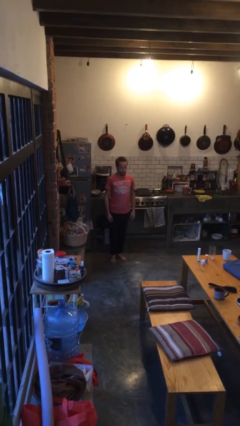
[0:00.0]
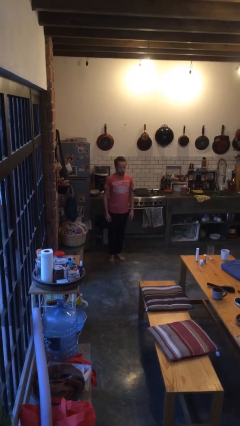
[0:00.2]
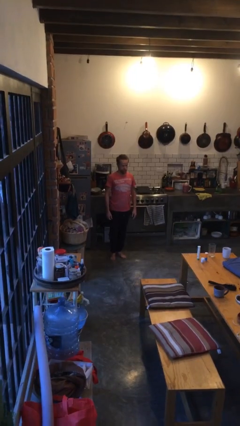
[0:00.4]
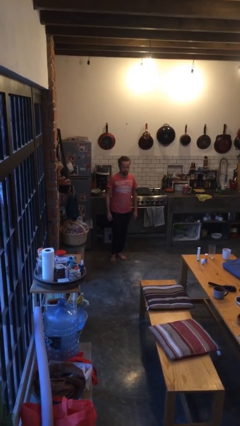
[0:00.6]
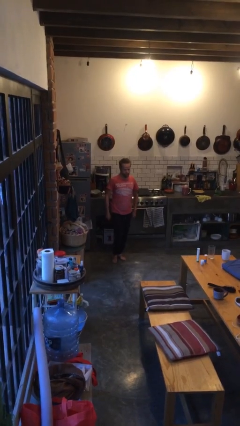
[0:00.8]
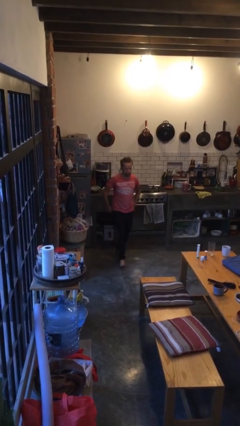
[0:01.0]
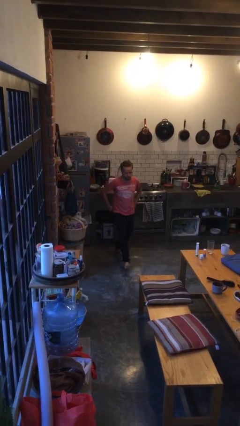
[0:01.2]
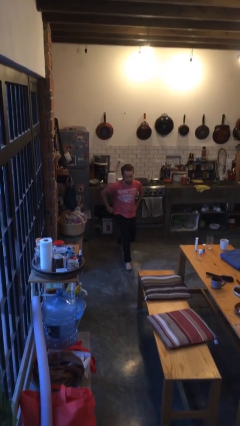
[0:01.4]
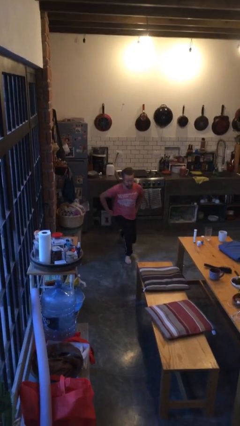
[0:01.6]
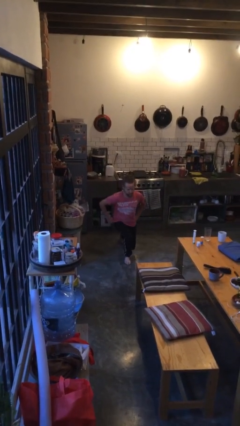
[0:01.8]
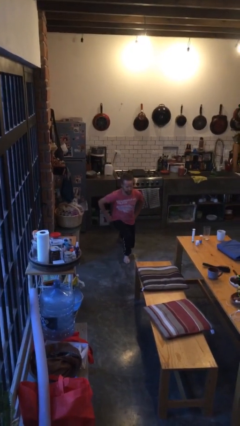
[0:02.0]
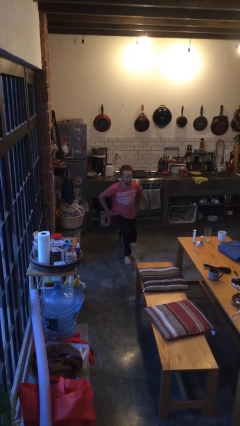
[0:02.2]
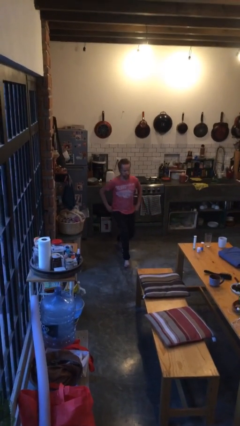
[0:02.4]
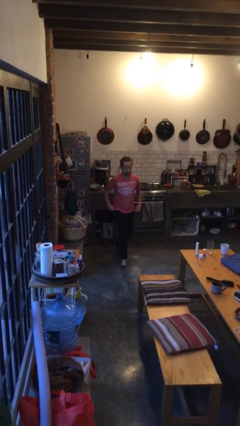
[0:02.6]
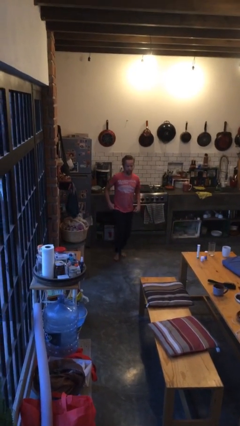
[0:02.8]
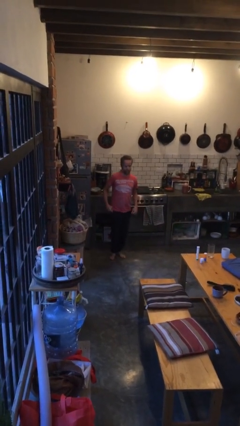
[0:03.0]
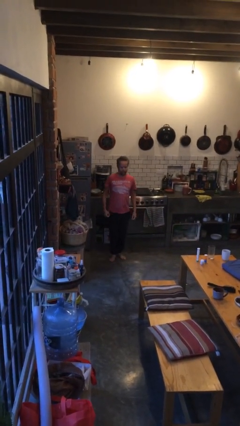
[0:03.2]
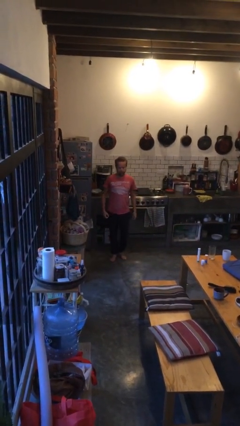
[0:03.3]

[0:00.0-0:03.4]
person exercises with lunges

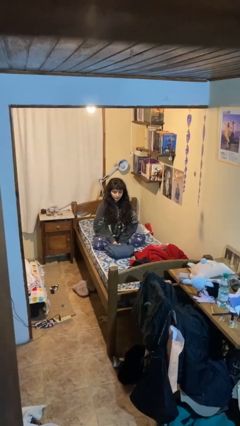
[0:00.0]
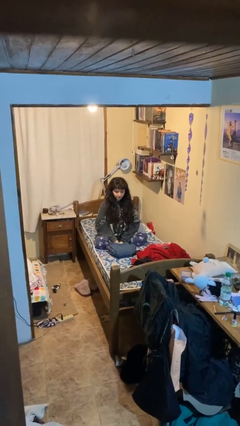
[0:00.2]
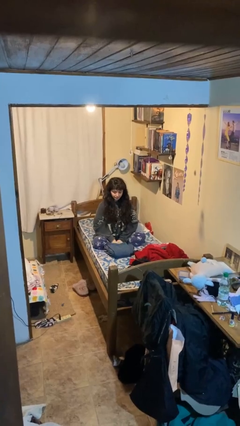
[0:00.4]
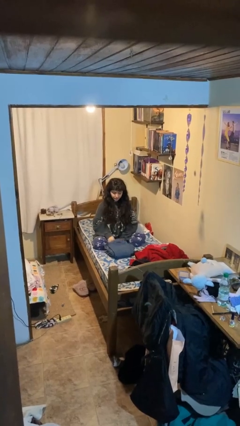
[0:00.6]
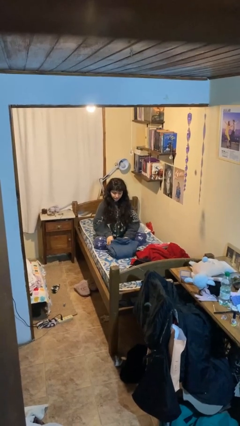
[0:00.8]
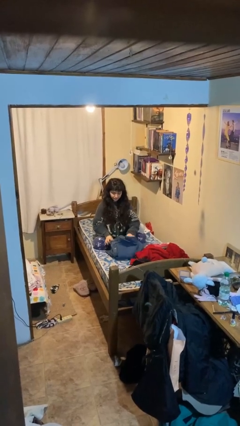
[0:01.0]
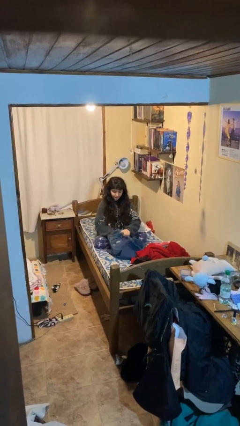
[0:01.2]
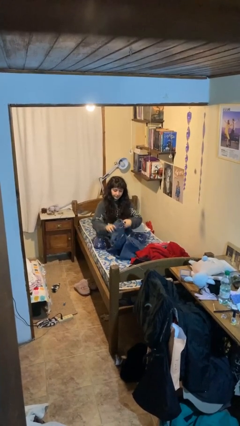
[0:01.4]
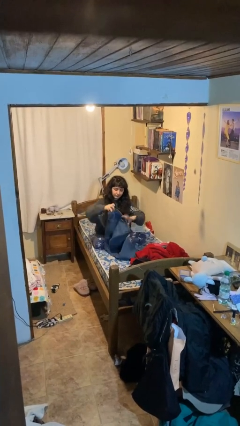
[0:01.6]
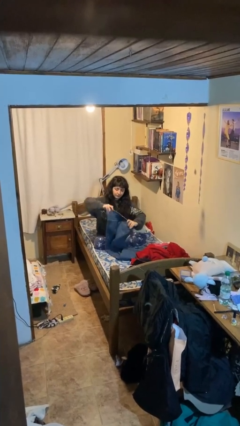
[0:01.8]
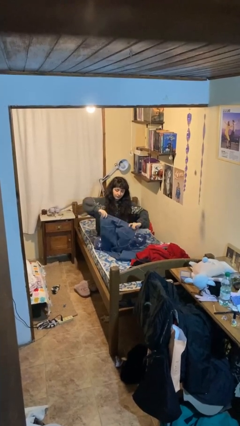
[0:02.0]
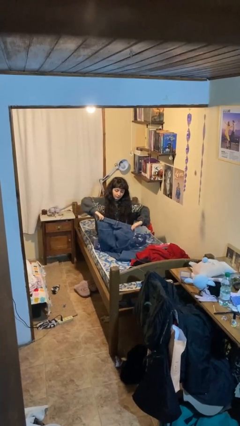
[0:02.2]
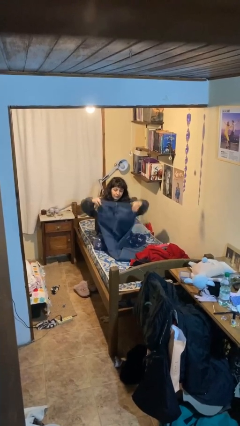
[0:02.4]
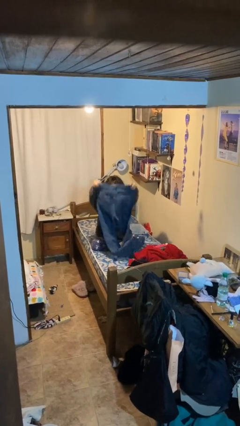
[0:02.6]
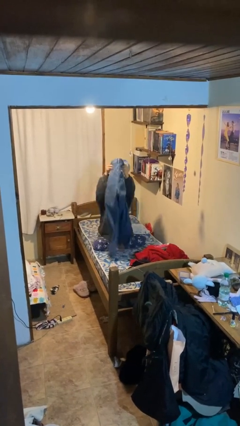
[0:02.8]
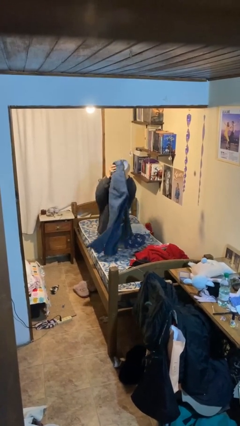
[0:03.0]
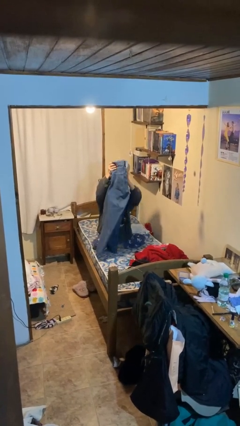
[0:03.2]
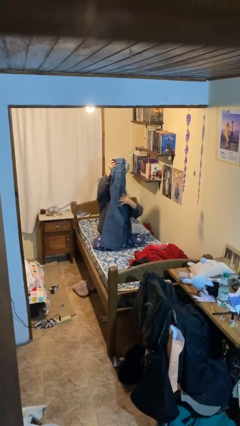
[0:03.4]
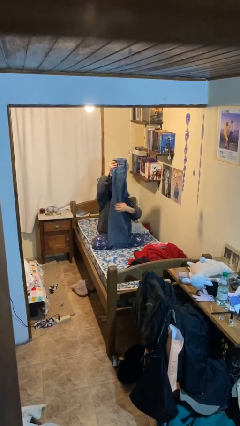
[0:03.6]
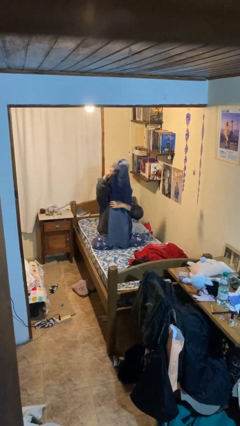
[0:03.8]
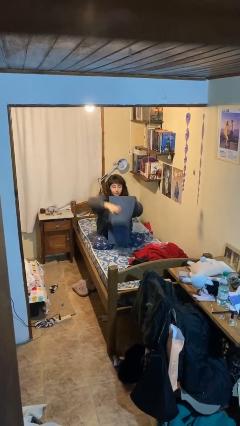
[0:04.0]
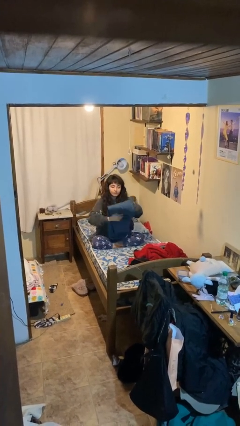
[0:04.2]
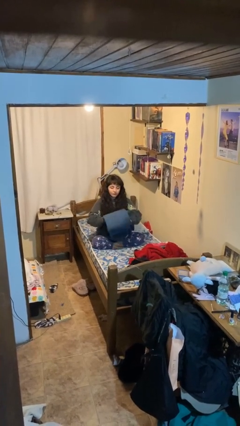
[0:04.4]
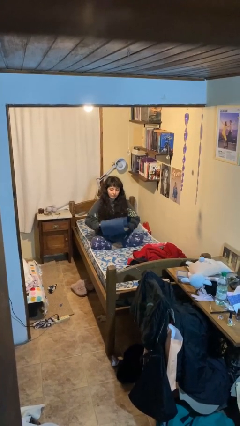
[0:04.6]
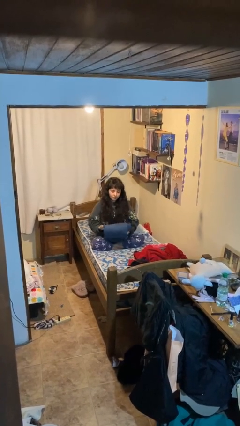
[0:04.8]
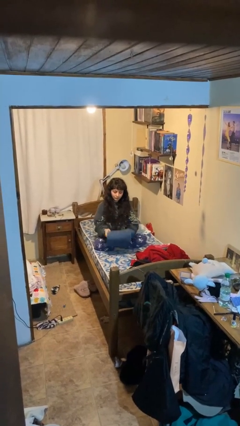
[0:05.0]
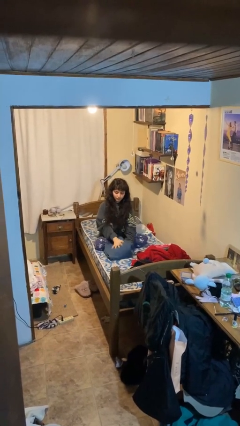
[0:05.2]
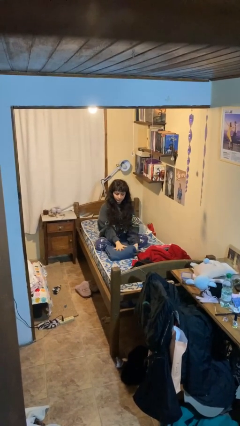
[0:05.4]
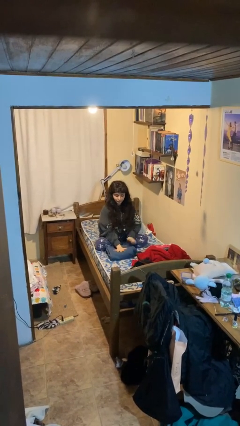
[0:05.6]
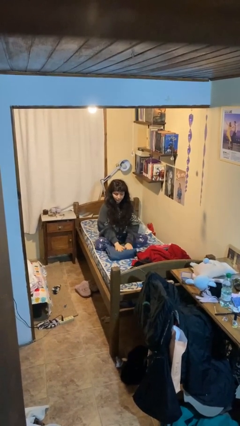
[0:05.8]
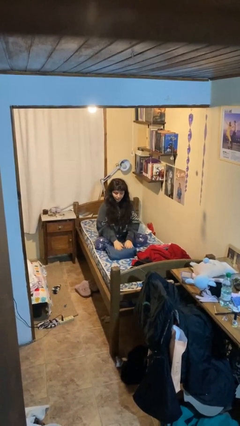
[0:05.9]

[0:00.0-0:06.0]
person folds pants

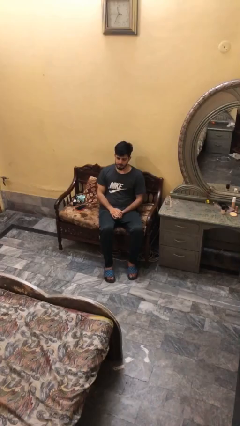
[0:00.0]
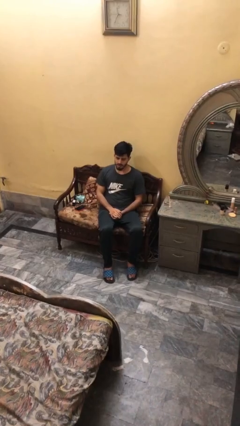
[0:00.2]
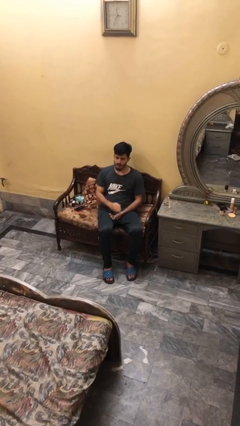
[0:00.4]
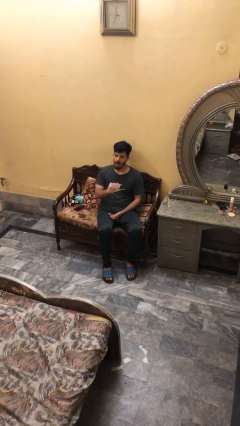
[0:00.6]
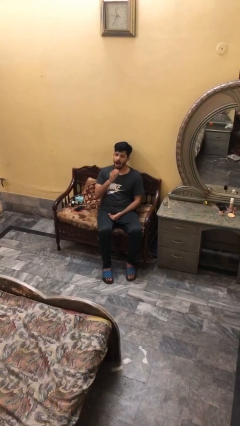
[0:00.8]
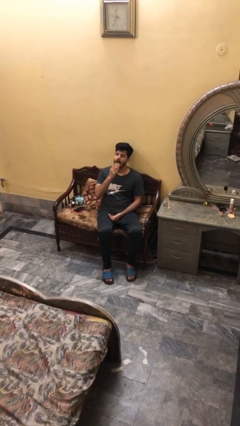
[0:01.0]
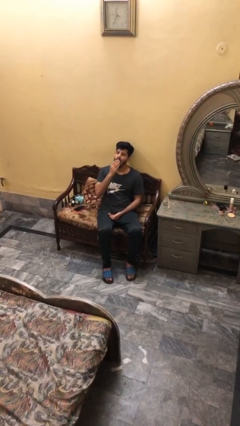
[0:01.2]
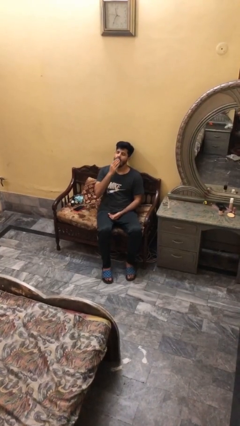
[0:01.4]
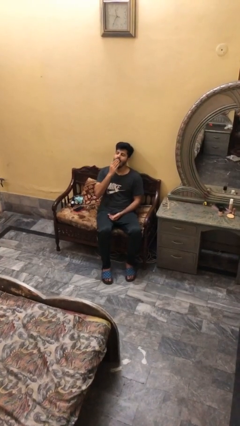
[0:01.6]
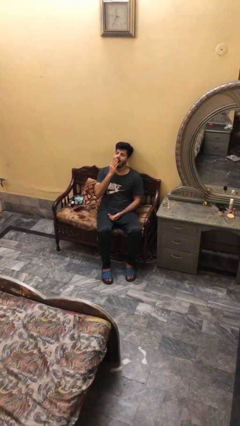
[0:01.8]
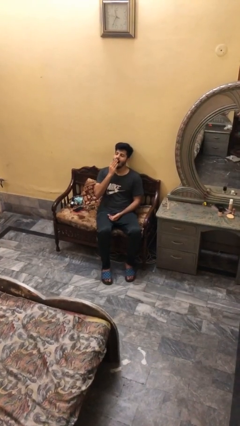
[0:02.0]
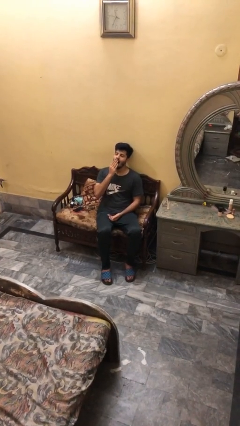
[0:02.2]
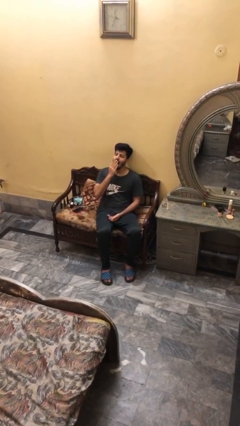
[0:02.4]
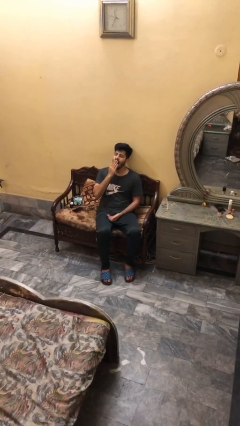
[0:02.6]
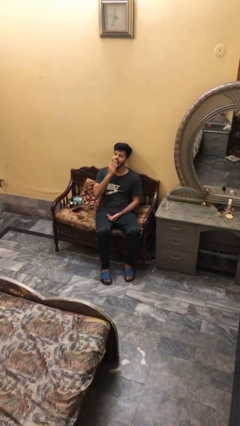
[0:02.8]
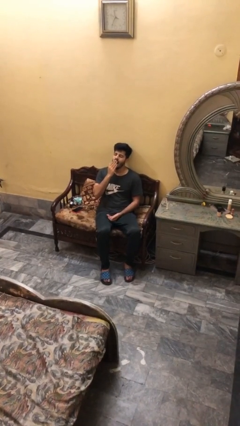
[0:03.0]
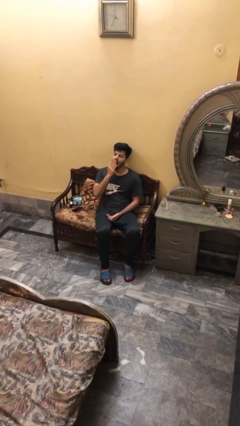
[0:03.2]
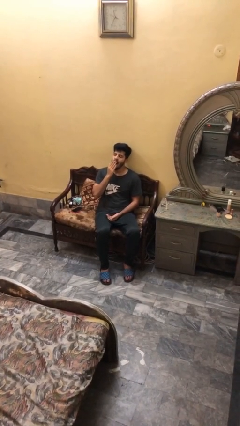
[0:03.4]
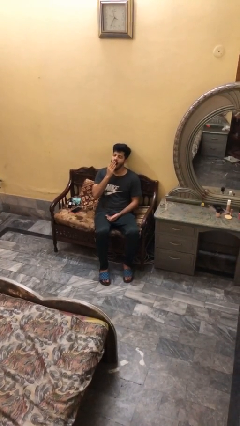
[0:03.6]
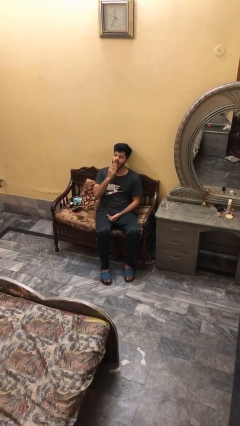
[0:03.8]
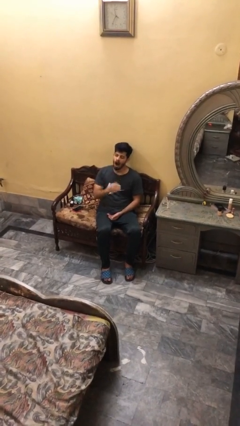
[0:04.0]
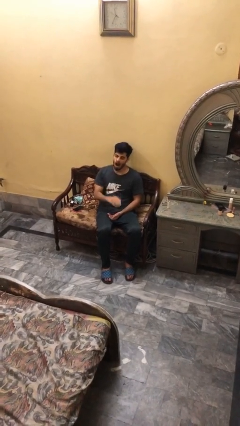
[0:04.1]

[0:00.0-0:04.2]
person yawns

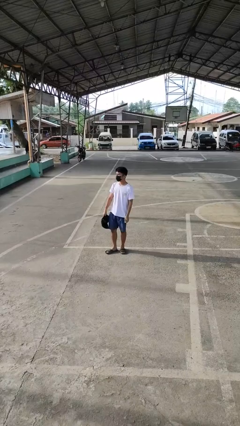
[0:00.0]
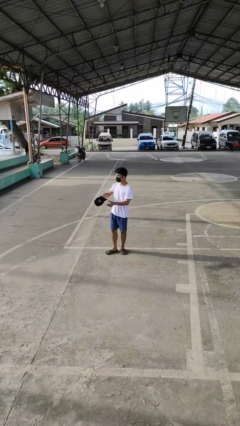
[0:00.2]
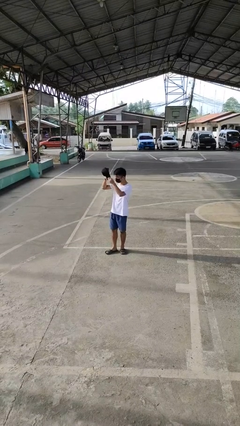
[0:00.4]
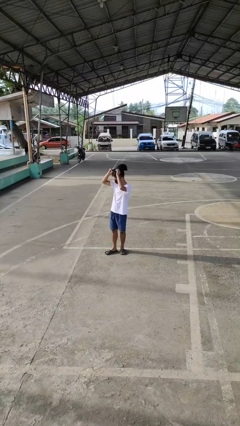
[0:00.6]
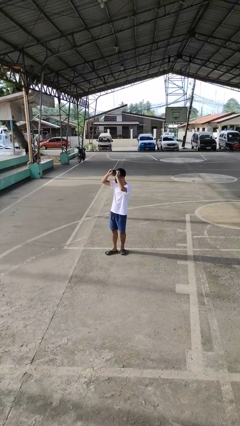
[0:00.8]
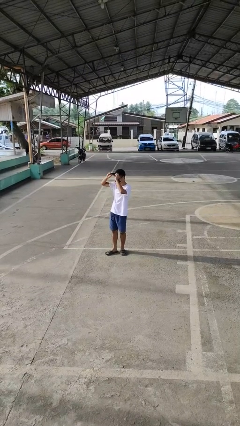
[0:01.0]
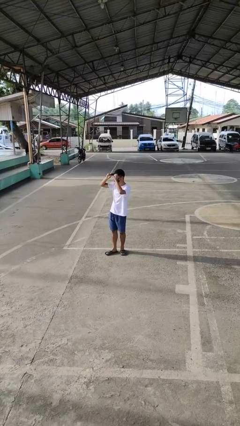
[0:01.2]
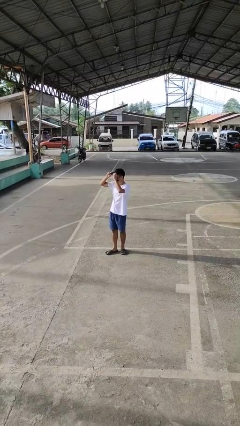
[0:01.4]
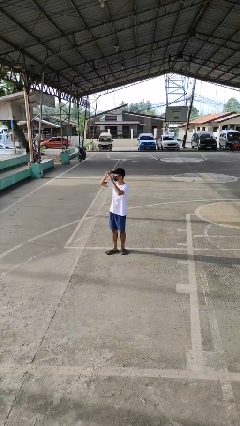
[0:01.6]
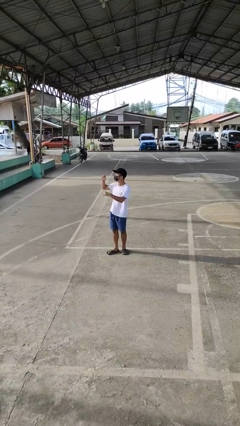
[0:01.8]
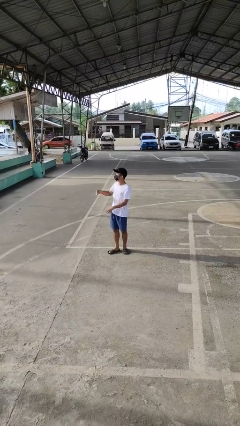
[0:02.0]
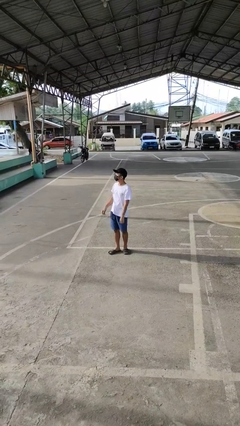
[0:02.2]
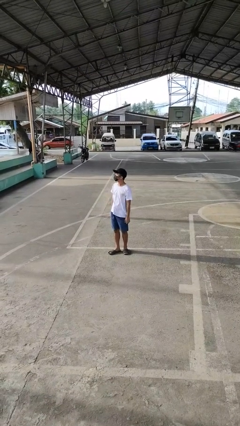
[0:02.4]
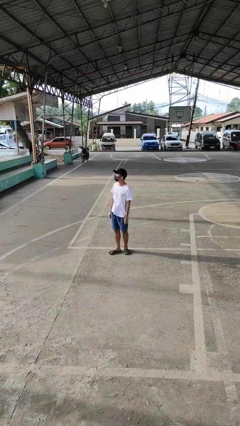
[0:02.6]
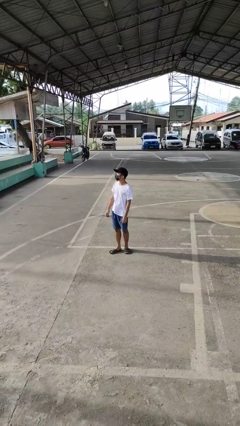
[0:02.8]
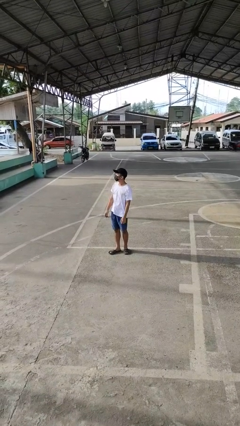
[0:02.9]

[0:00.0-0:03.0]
person puts on hat

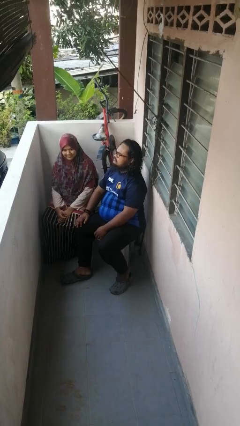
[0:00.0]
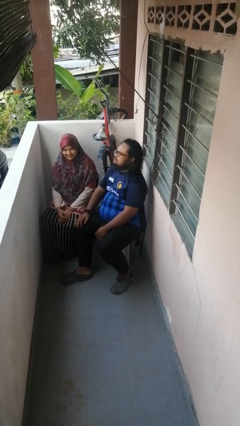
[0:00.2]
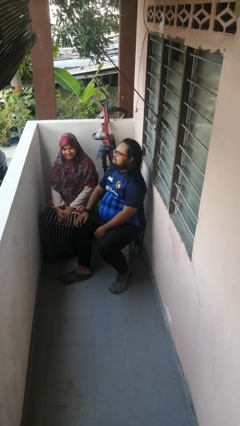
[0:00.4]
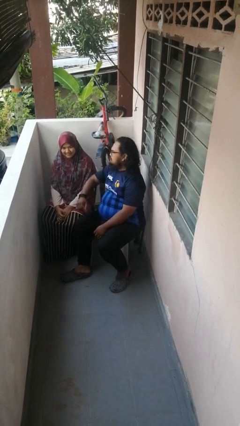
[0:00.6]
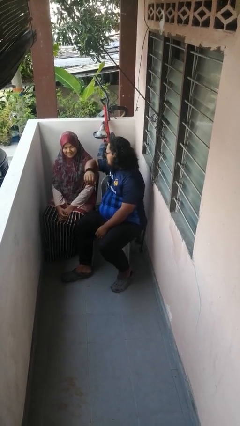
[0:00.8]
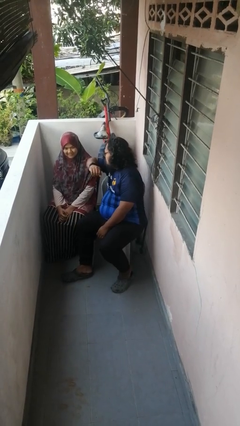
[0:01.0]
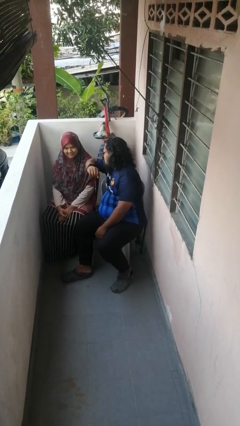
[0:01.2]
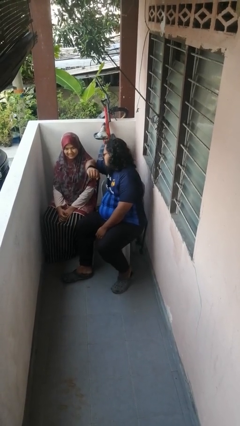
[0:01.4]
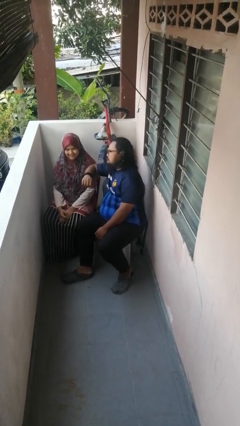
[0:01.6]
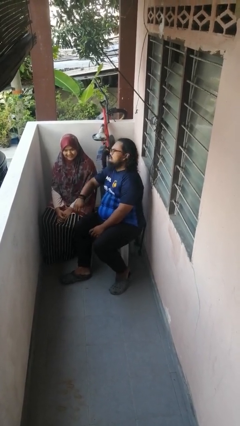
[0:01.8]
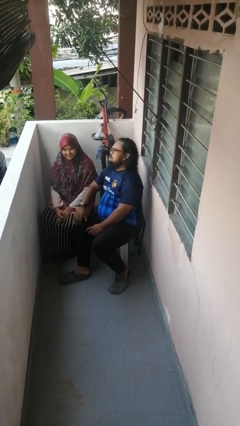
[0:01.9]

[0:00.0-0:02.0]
person nudges person with elbow
